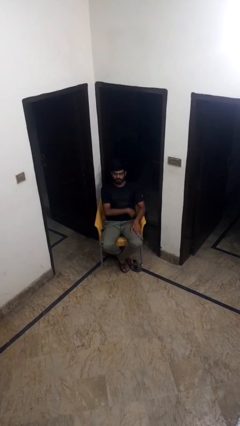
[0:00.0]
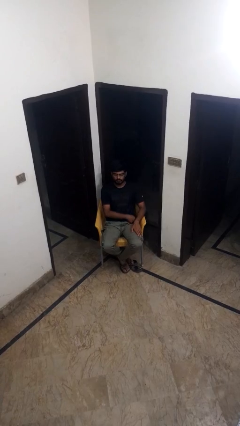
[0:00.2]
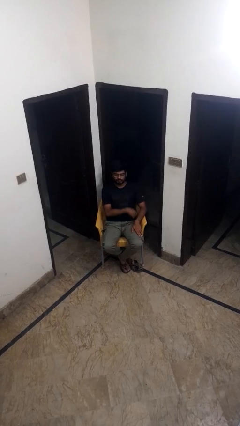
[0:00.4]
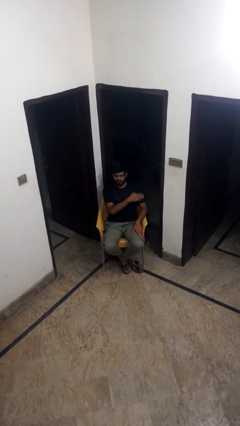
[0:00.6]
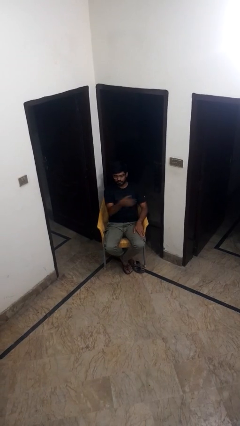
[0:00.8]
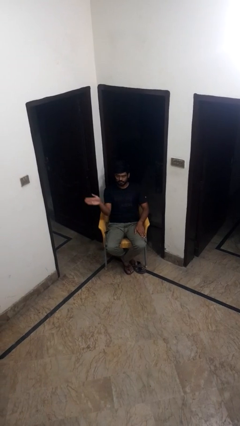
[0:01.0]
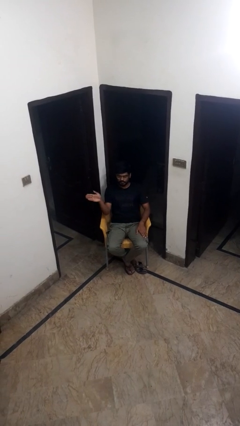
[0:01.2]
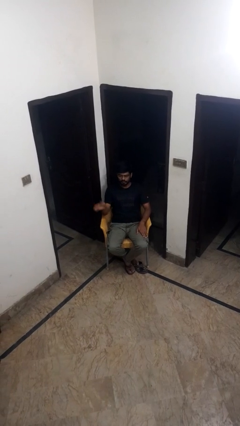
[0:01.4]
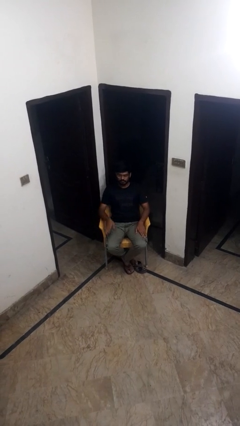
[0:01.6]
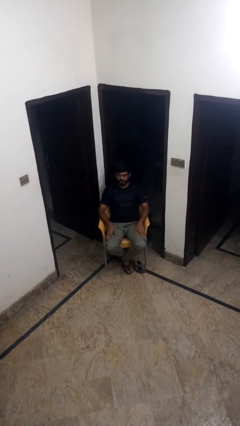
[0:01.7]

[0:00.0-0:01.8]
person gestures swipe right

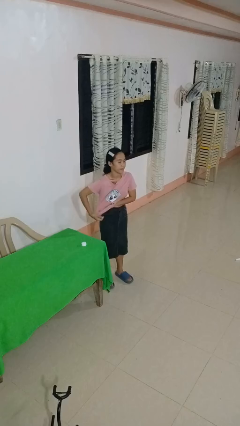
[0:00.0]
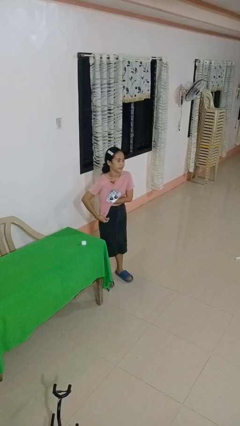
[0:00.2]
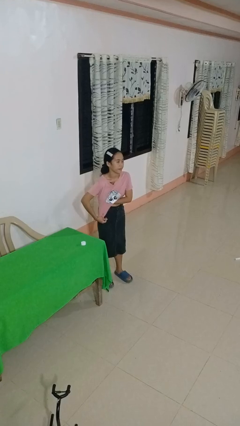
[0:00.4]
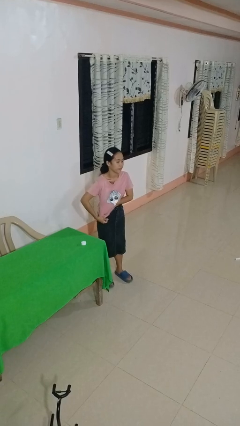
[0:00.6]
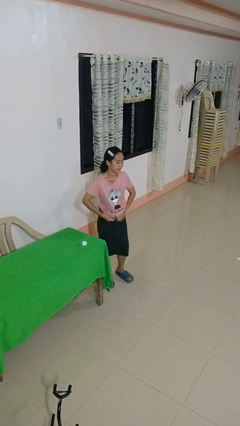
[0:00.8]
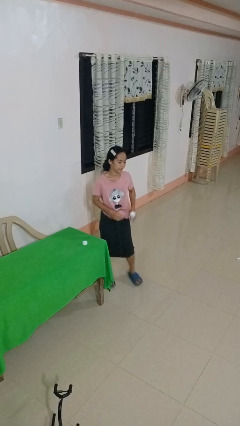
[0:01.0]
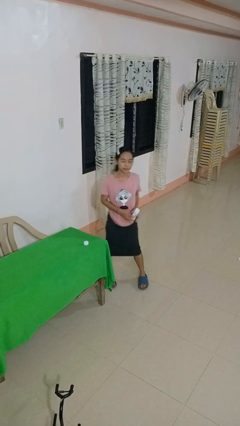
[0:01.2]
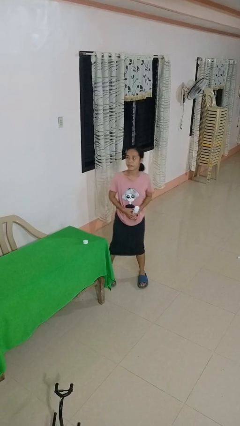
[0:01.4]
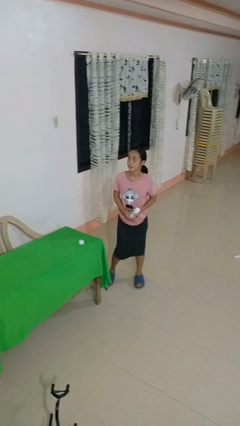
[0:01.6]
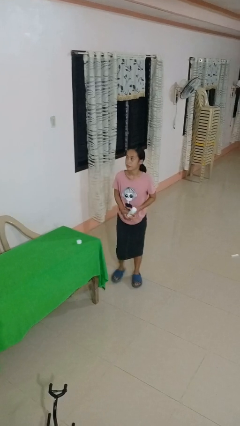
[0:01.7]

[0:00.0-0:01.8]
person applies deodorant

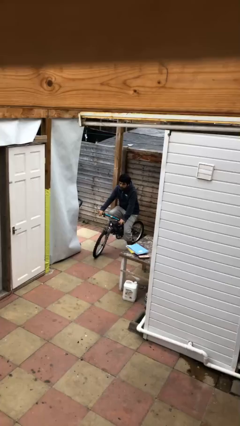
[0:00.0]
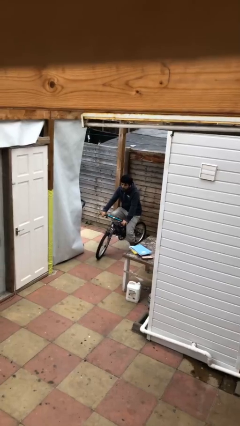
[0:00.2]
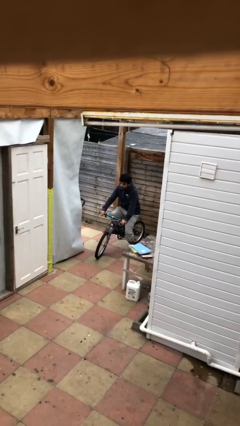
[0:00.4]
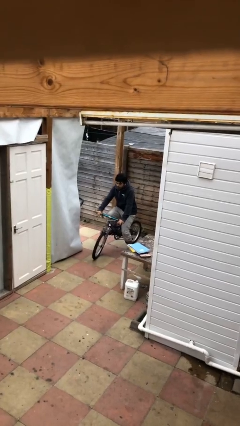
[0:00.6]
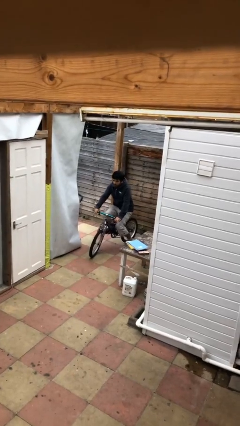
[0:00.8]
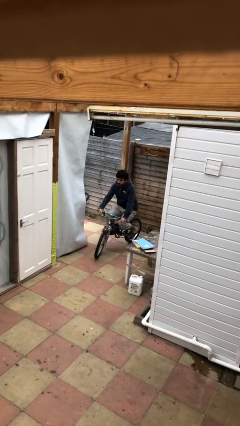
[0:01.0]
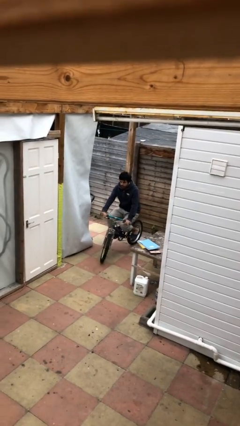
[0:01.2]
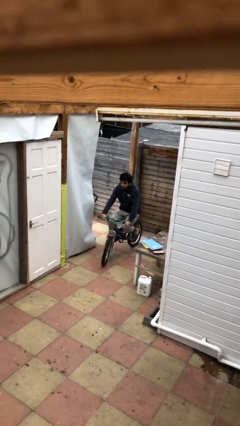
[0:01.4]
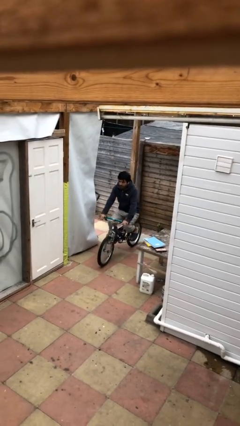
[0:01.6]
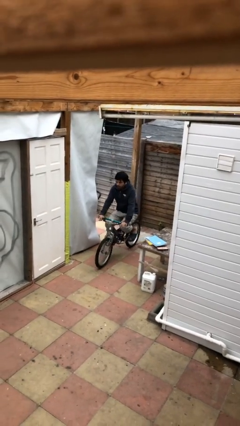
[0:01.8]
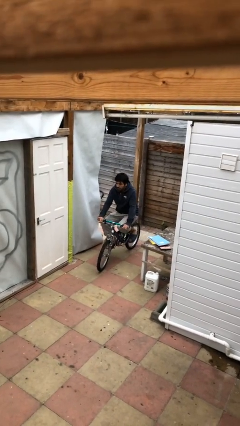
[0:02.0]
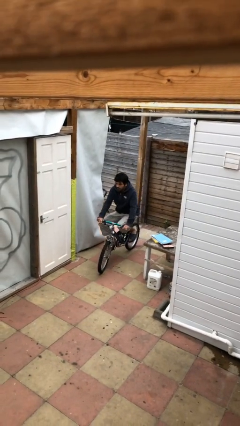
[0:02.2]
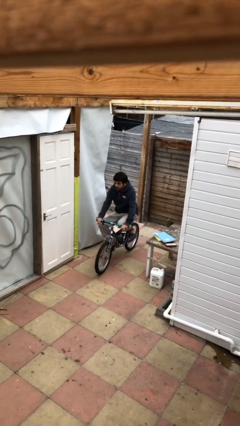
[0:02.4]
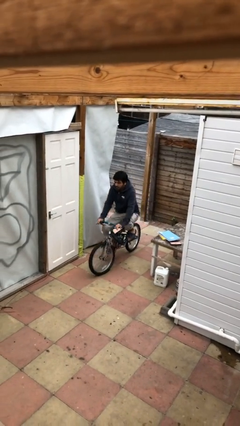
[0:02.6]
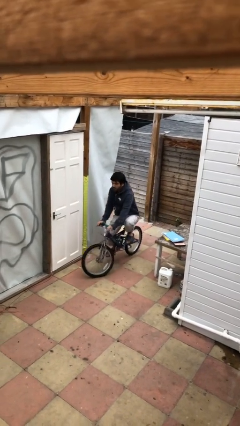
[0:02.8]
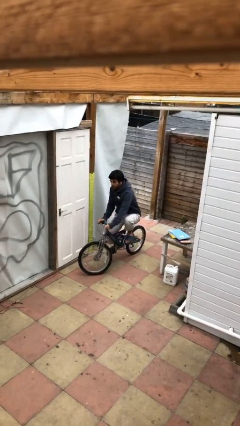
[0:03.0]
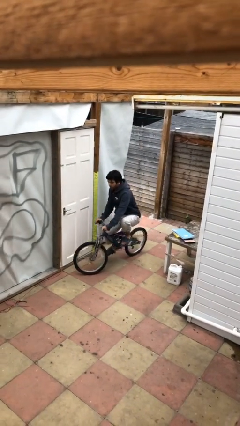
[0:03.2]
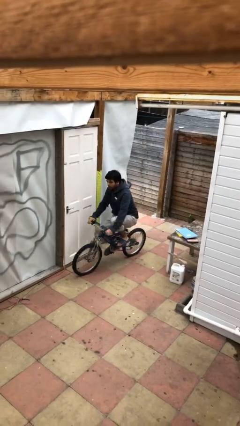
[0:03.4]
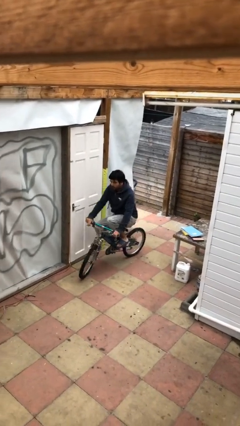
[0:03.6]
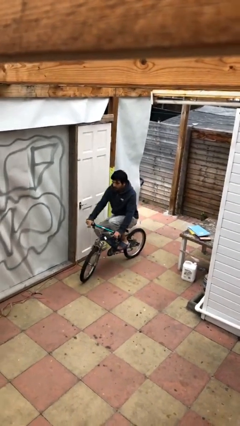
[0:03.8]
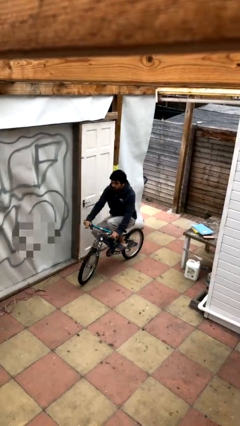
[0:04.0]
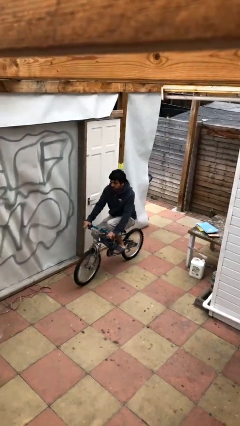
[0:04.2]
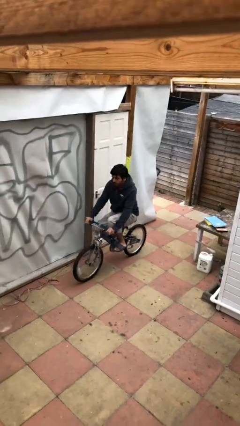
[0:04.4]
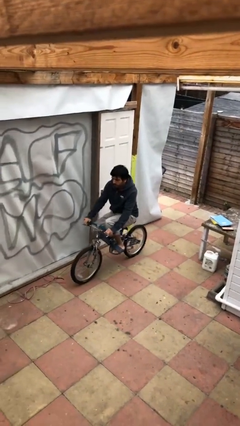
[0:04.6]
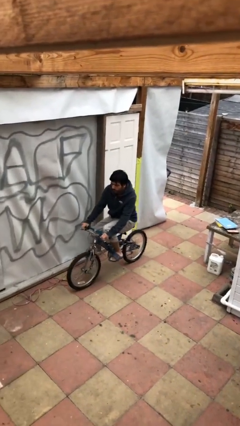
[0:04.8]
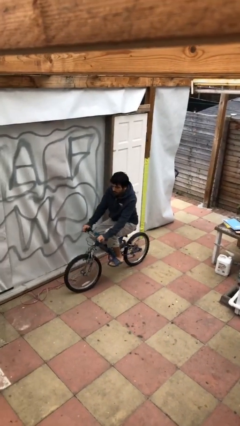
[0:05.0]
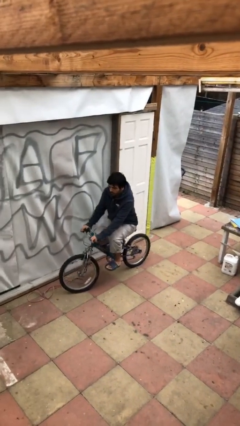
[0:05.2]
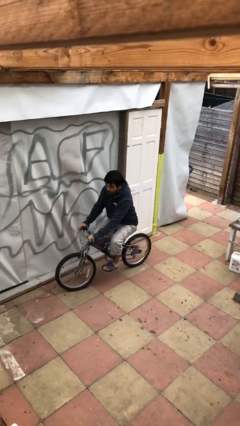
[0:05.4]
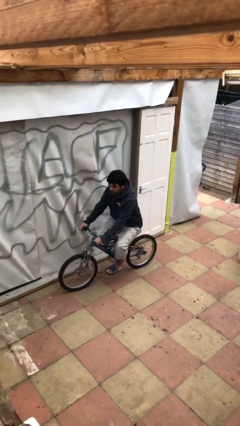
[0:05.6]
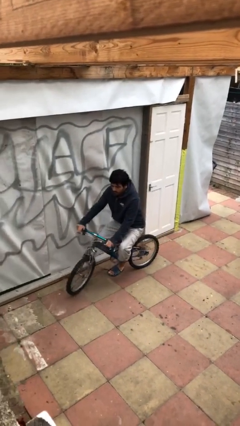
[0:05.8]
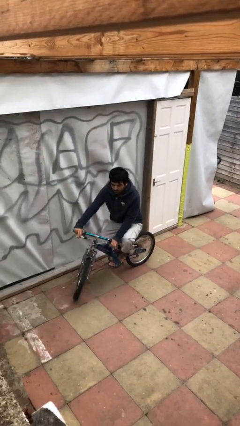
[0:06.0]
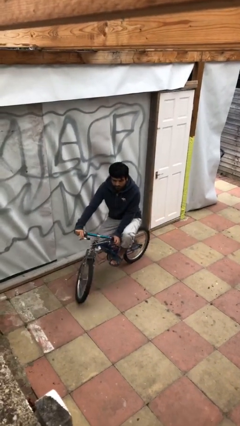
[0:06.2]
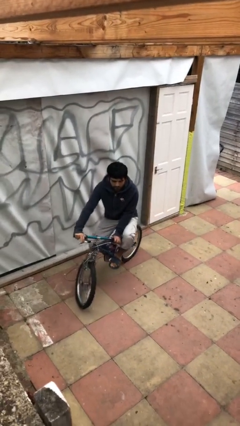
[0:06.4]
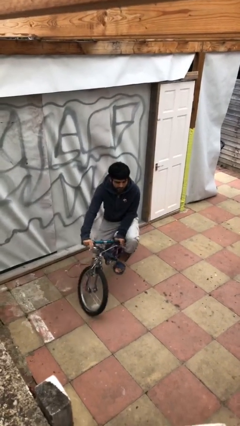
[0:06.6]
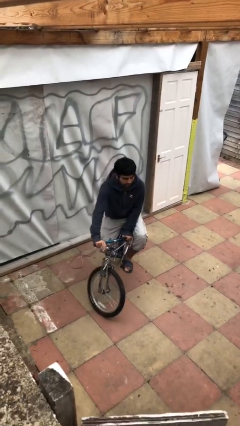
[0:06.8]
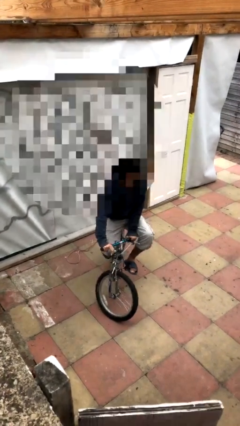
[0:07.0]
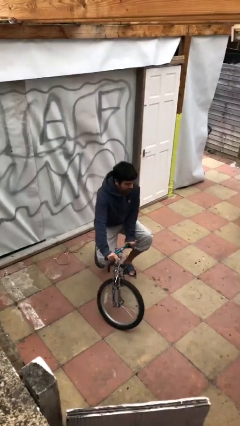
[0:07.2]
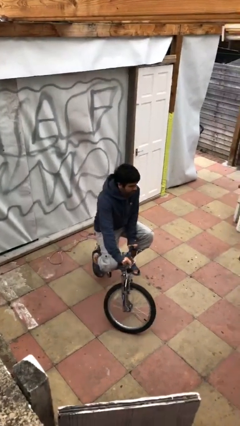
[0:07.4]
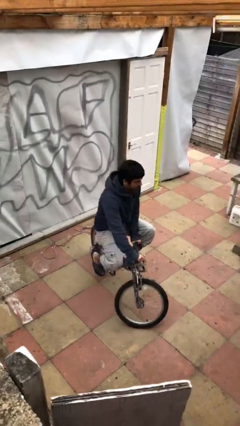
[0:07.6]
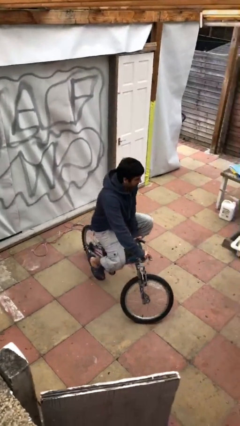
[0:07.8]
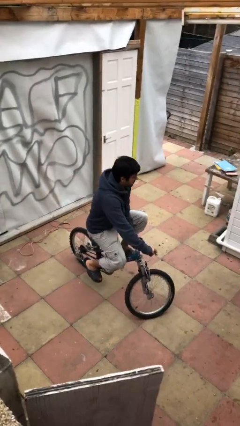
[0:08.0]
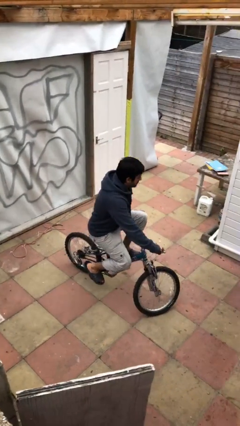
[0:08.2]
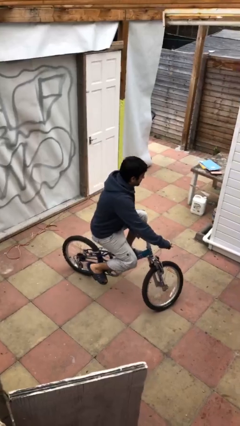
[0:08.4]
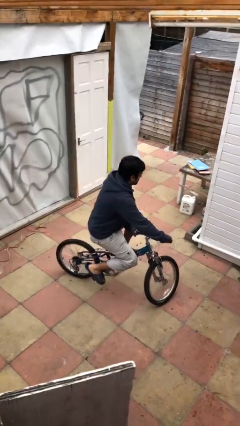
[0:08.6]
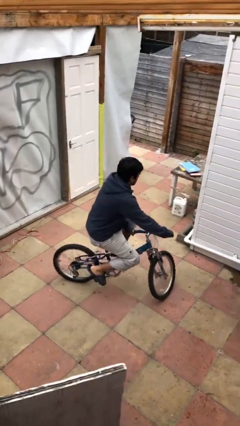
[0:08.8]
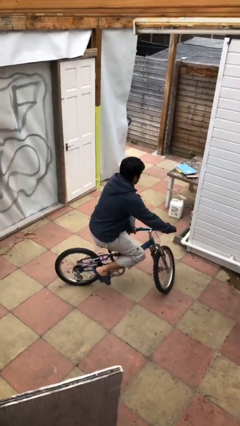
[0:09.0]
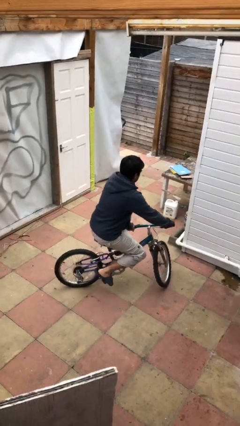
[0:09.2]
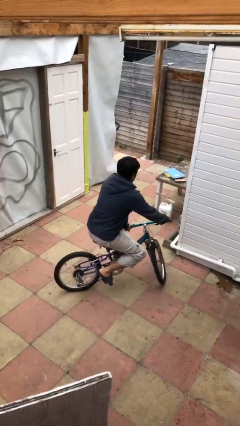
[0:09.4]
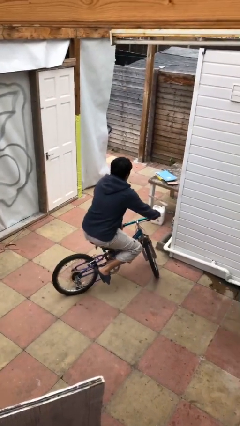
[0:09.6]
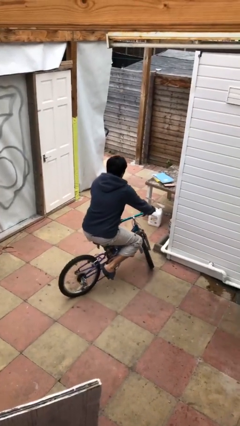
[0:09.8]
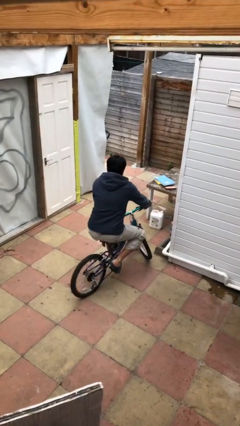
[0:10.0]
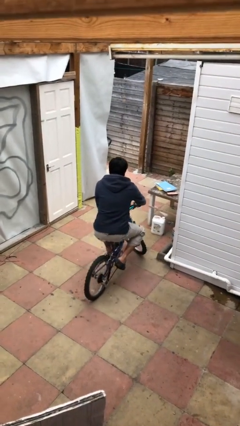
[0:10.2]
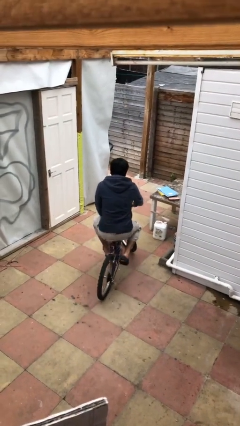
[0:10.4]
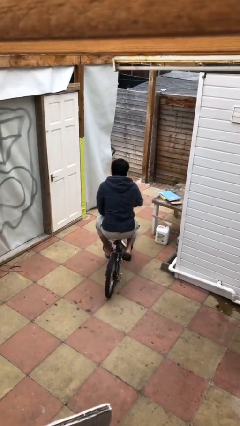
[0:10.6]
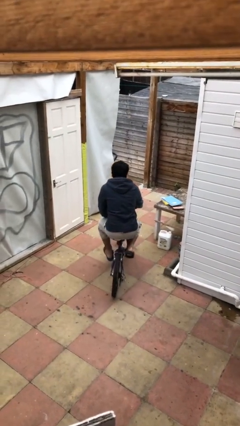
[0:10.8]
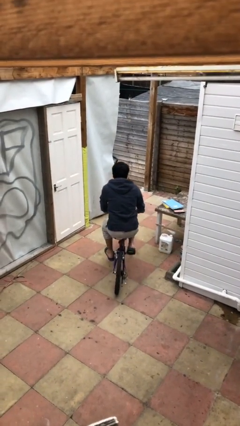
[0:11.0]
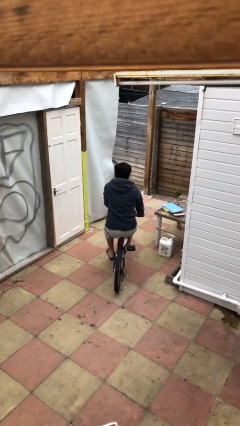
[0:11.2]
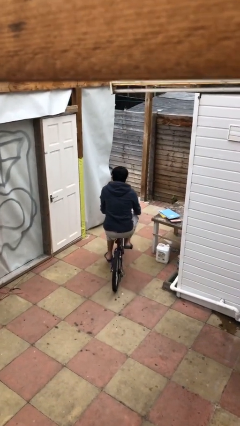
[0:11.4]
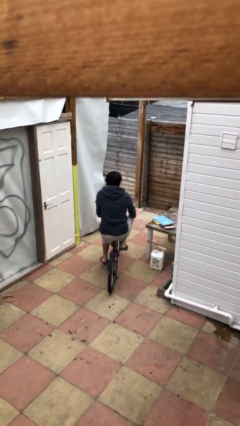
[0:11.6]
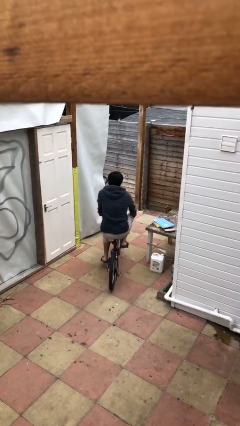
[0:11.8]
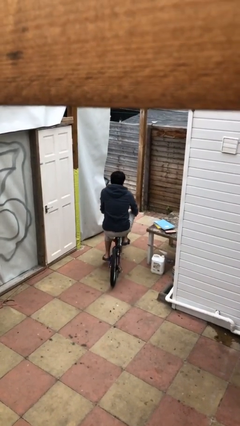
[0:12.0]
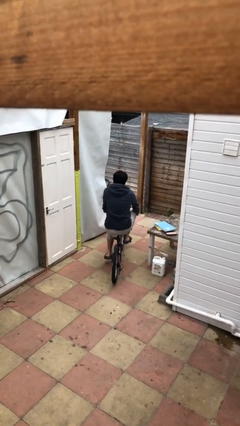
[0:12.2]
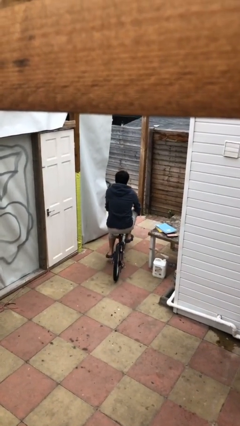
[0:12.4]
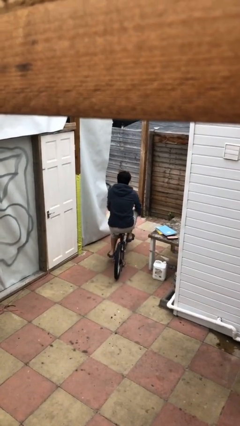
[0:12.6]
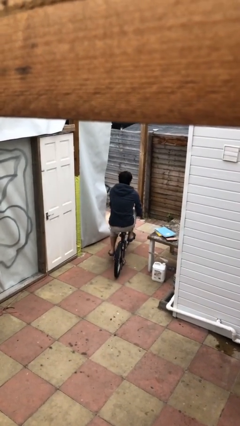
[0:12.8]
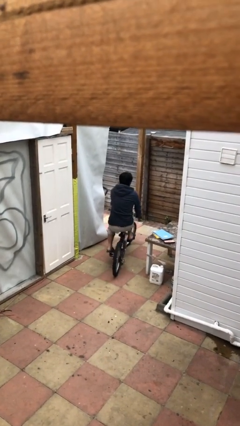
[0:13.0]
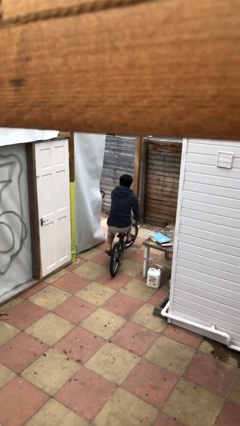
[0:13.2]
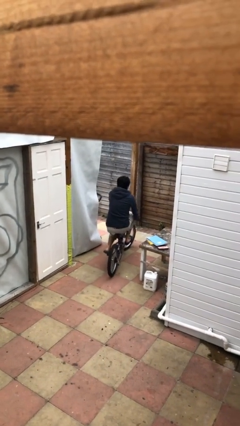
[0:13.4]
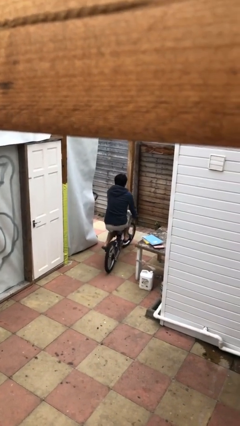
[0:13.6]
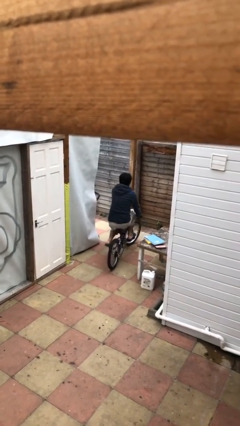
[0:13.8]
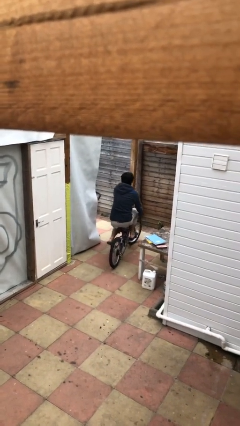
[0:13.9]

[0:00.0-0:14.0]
person rides bicycle
